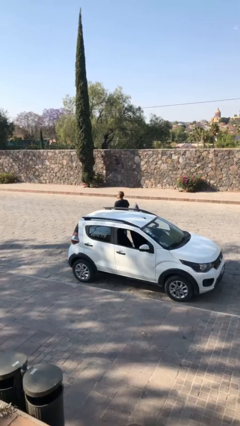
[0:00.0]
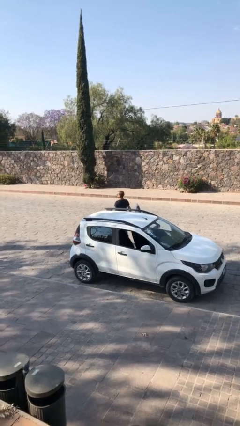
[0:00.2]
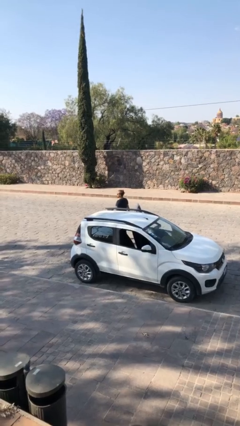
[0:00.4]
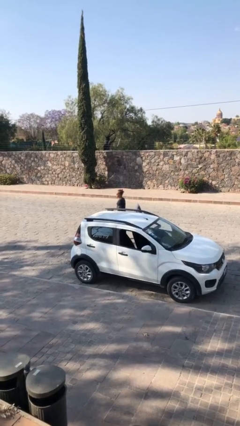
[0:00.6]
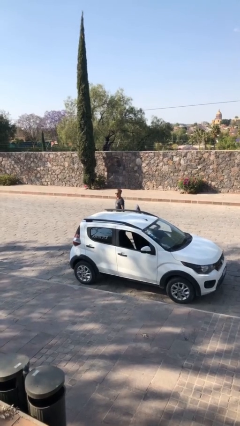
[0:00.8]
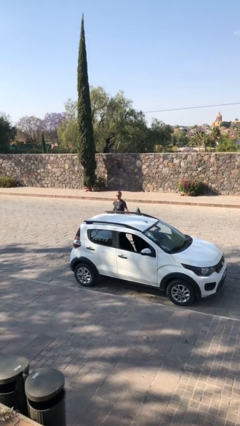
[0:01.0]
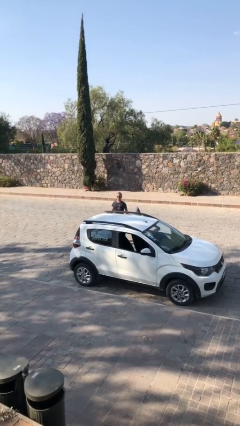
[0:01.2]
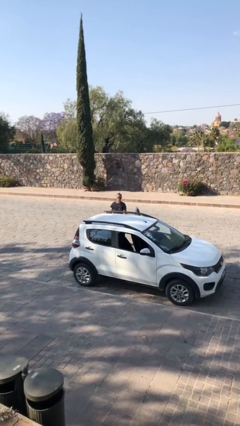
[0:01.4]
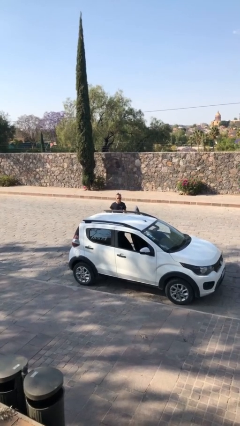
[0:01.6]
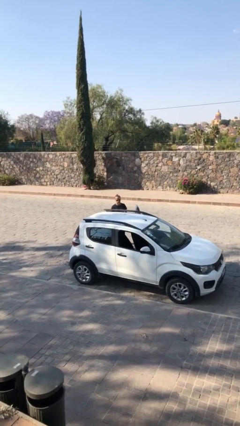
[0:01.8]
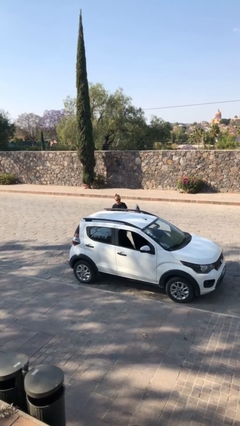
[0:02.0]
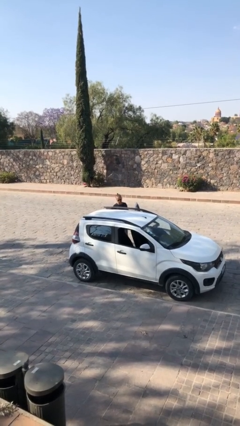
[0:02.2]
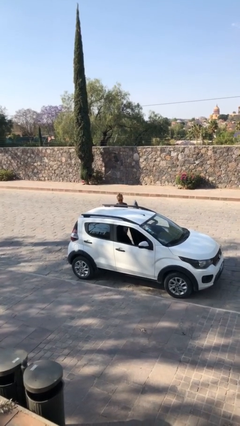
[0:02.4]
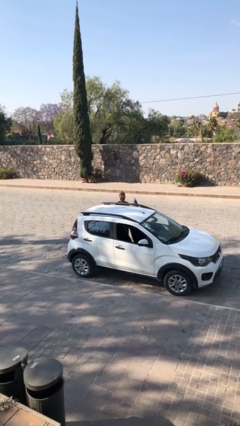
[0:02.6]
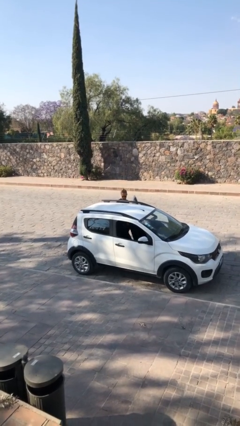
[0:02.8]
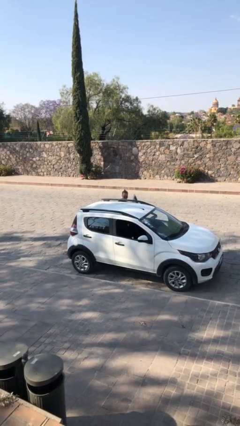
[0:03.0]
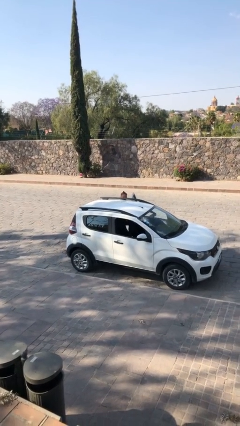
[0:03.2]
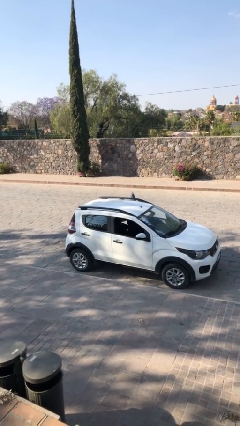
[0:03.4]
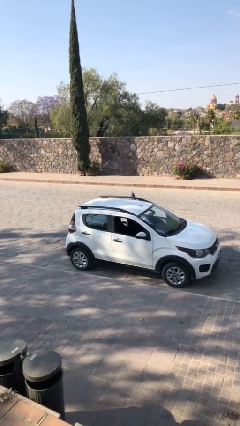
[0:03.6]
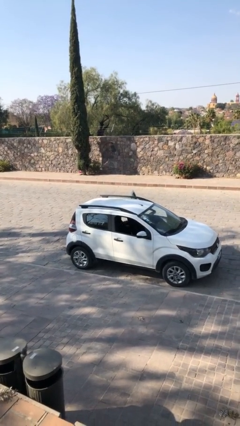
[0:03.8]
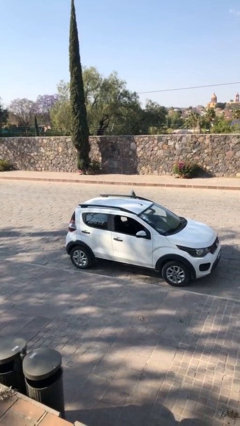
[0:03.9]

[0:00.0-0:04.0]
person enters car

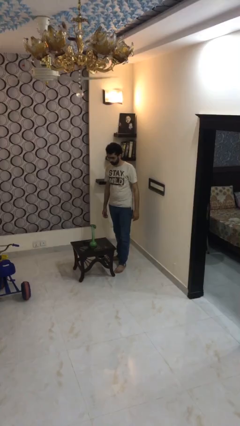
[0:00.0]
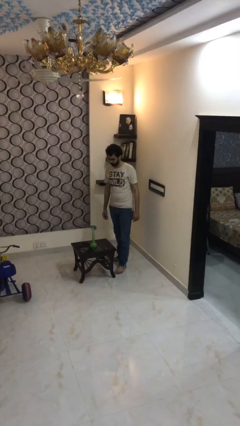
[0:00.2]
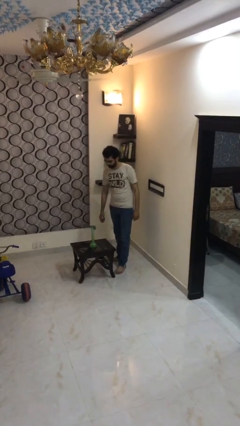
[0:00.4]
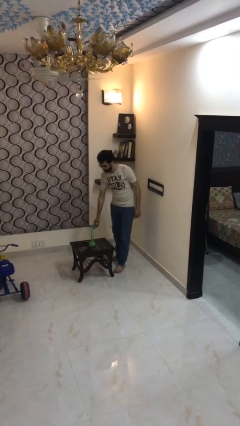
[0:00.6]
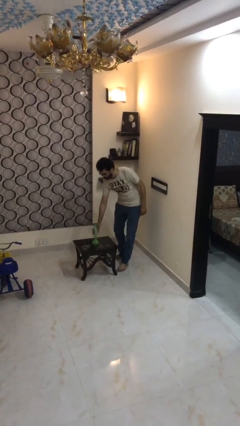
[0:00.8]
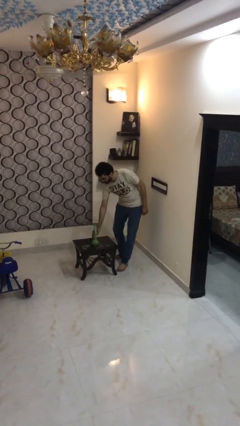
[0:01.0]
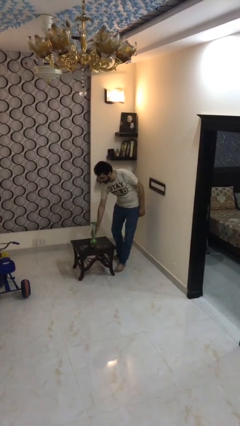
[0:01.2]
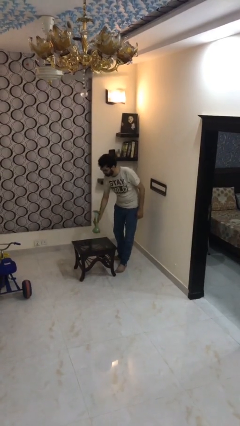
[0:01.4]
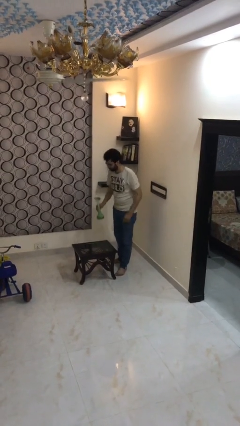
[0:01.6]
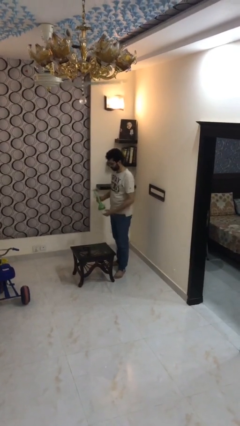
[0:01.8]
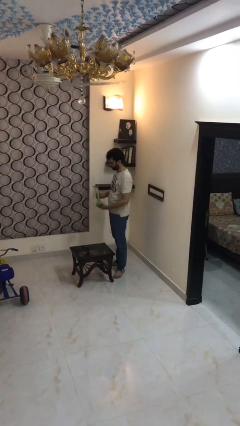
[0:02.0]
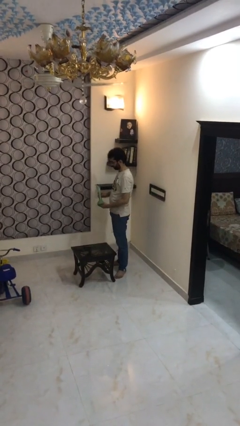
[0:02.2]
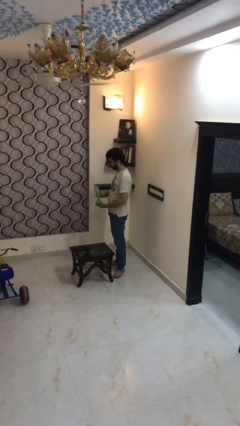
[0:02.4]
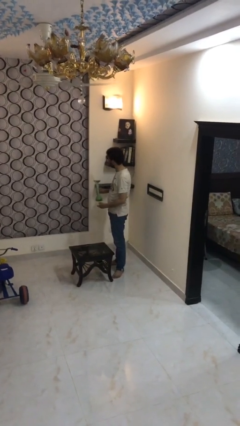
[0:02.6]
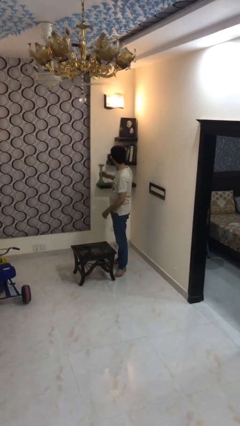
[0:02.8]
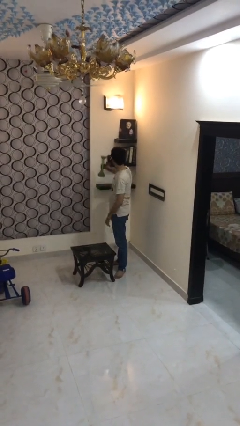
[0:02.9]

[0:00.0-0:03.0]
person picks up object from table

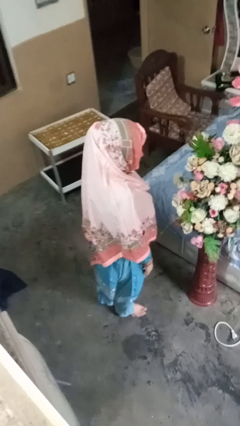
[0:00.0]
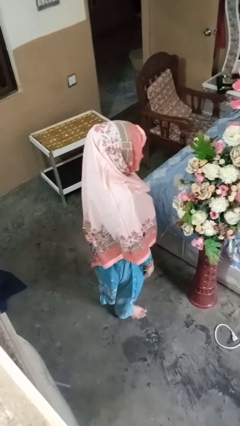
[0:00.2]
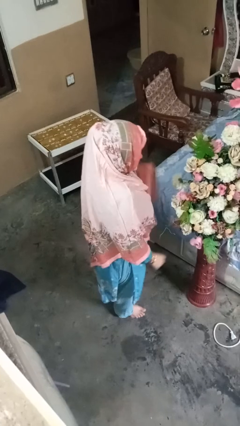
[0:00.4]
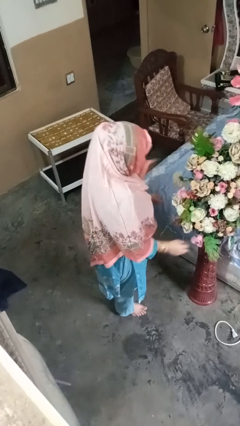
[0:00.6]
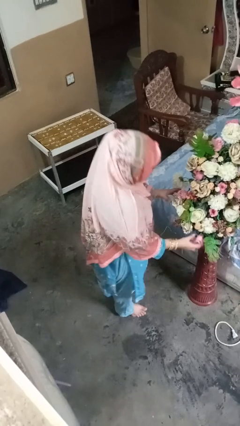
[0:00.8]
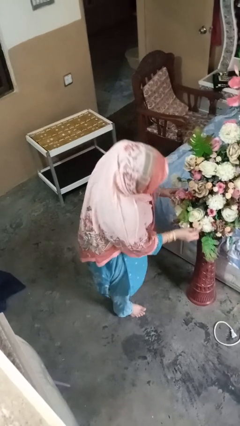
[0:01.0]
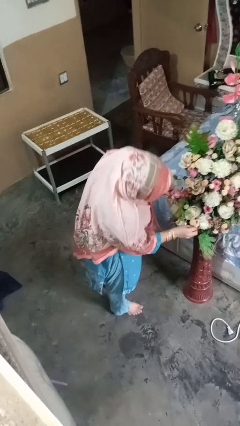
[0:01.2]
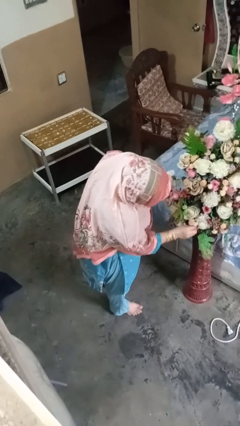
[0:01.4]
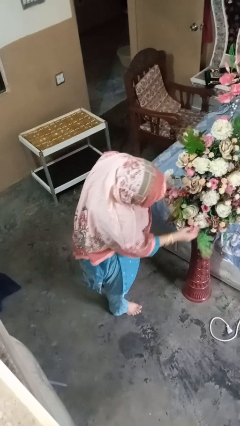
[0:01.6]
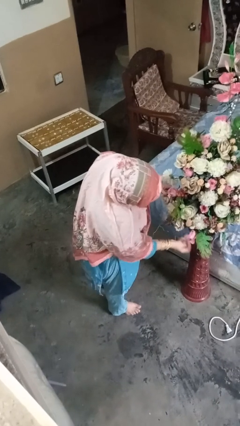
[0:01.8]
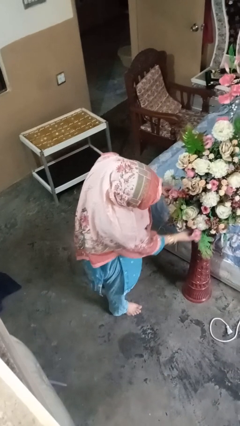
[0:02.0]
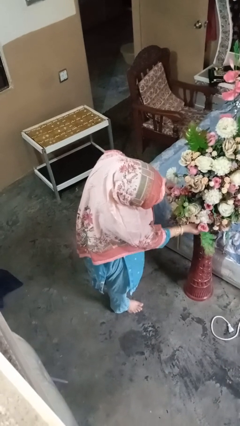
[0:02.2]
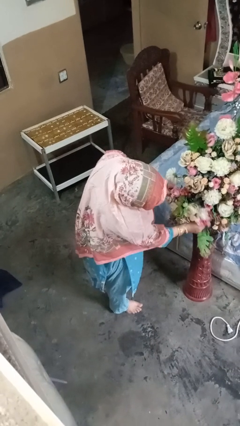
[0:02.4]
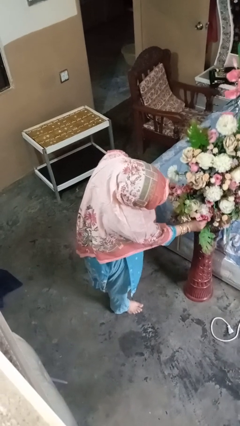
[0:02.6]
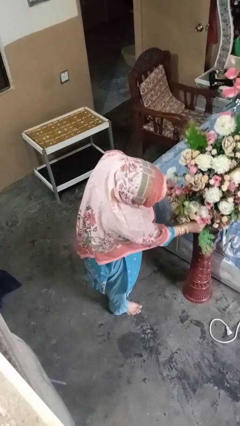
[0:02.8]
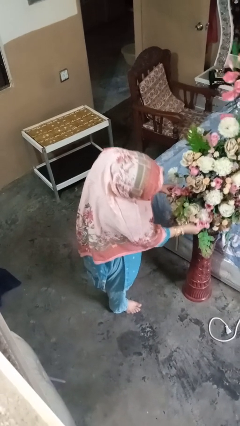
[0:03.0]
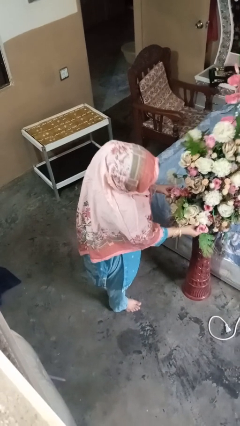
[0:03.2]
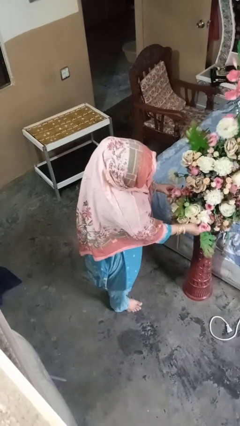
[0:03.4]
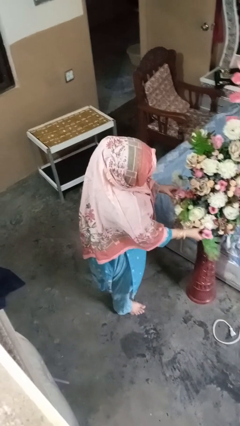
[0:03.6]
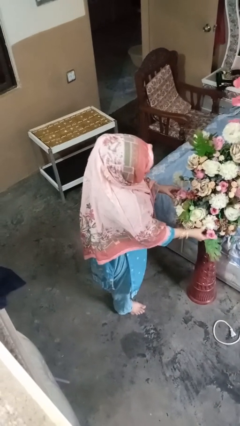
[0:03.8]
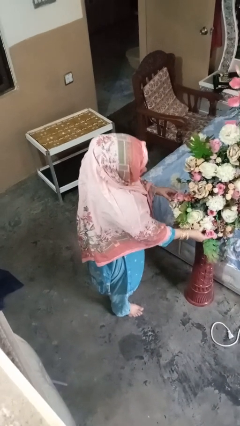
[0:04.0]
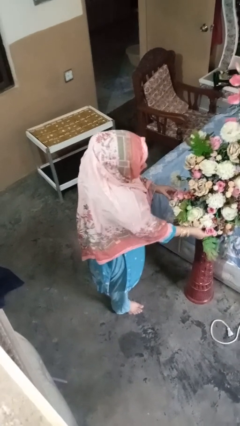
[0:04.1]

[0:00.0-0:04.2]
person arranges flowers in vase

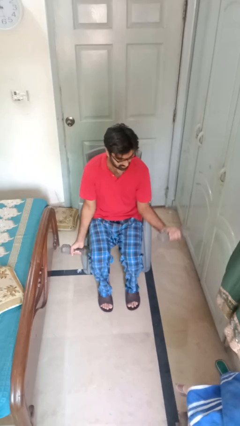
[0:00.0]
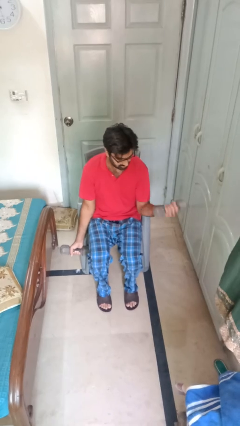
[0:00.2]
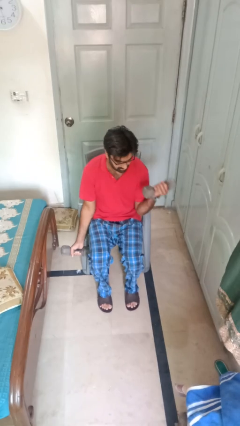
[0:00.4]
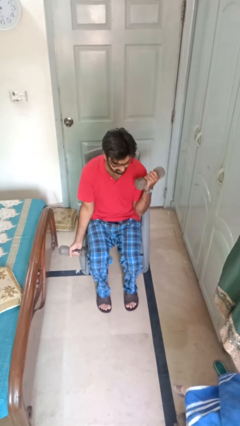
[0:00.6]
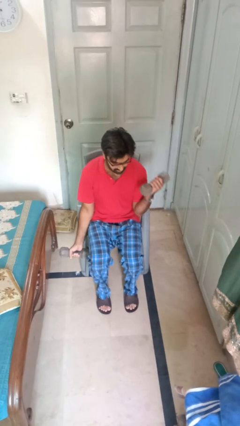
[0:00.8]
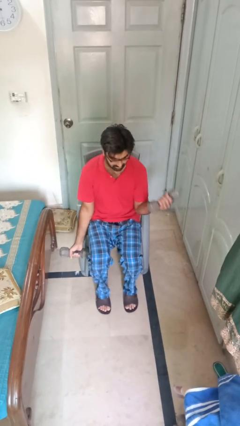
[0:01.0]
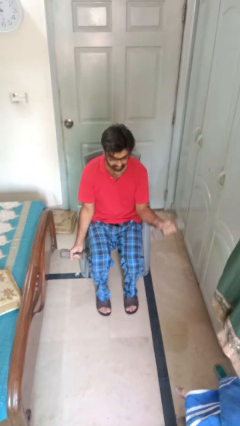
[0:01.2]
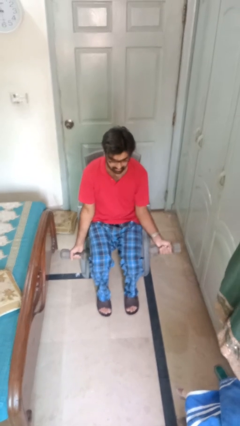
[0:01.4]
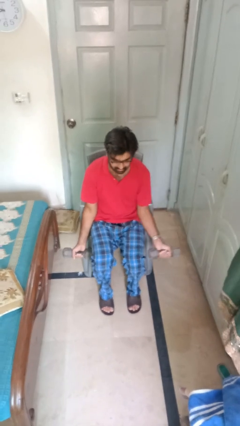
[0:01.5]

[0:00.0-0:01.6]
person lifts dumbbells

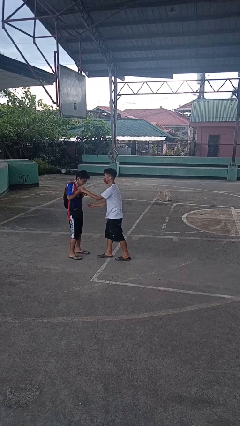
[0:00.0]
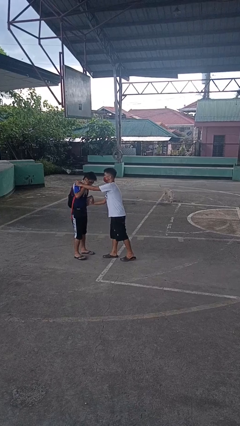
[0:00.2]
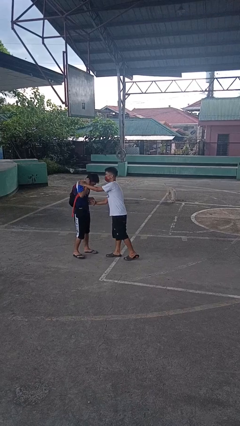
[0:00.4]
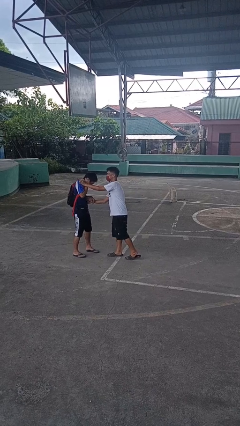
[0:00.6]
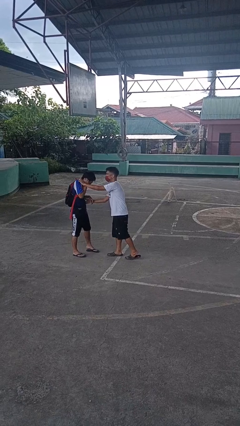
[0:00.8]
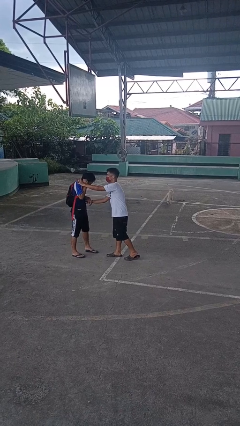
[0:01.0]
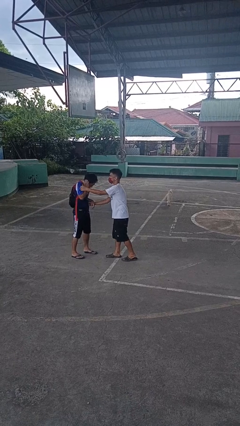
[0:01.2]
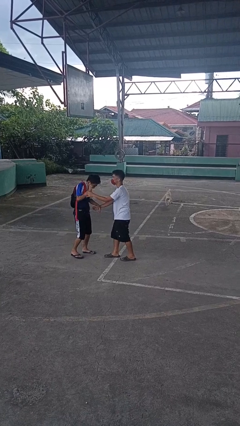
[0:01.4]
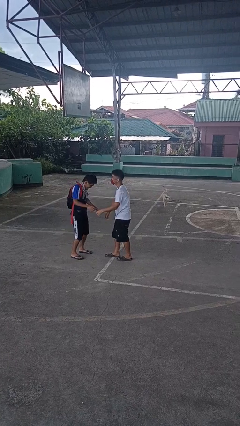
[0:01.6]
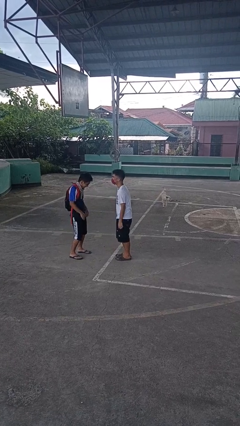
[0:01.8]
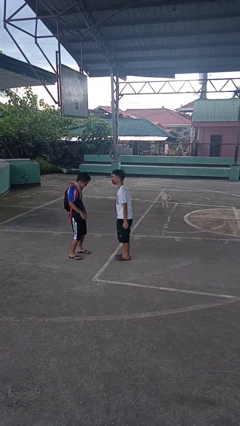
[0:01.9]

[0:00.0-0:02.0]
person tickles person

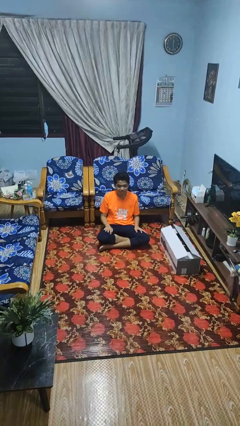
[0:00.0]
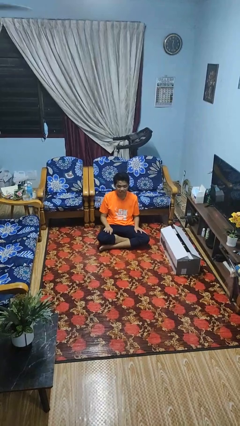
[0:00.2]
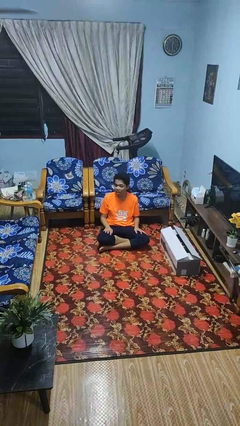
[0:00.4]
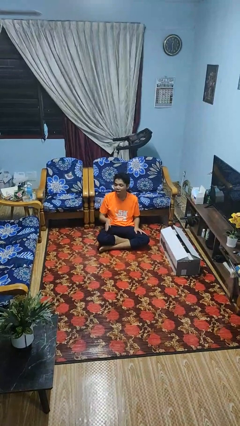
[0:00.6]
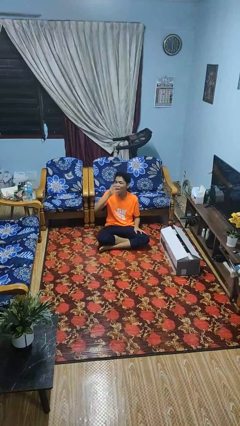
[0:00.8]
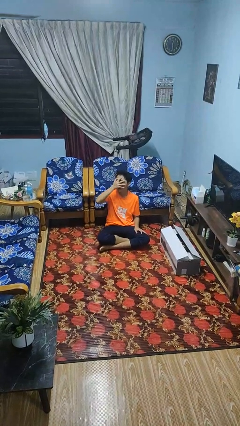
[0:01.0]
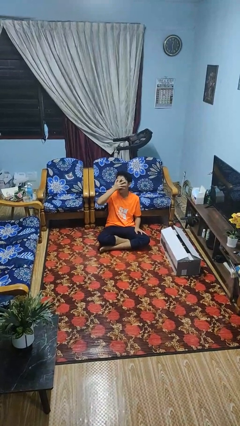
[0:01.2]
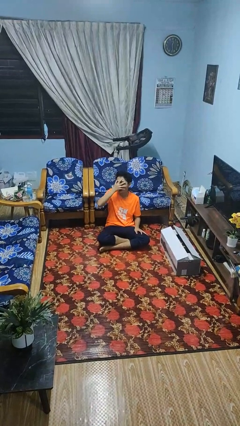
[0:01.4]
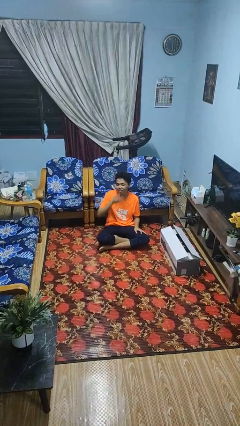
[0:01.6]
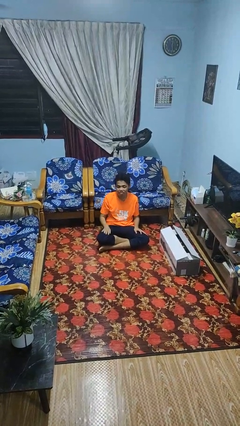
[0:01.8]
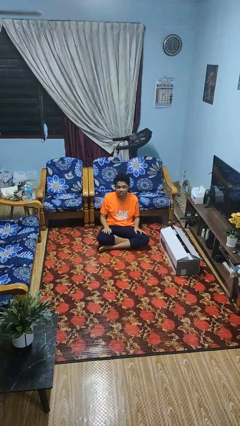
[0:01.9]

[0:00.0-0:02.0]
person covers face with hands

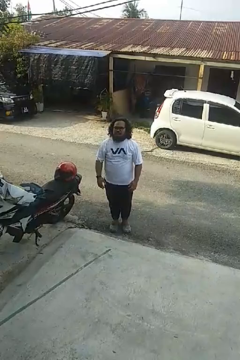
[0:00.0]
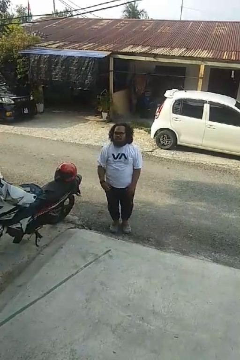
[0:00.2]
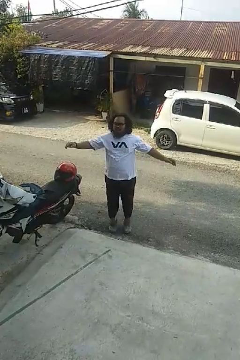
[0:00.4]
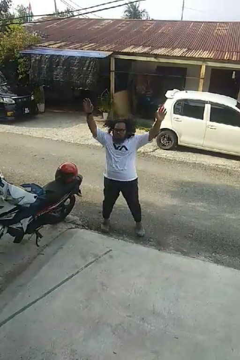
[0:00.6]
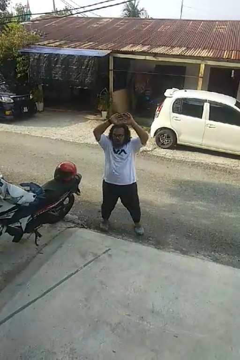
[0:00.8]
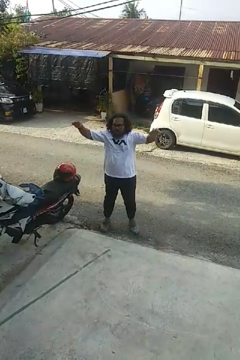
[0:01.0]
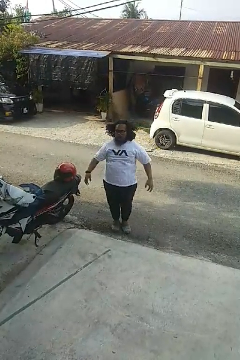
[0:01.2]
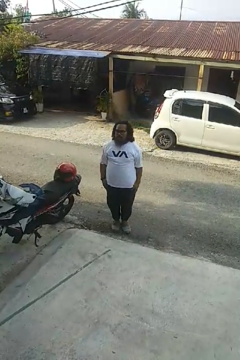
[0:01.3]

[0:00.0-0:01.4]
person exercises with jumping jacks
